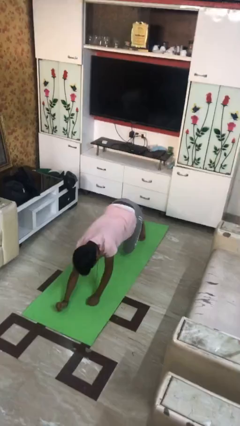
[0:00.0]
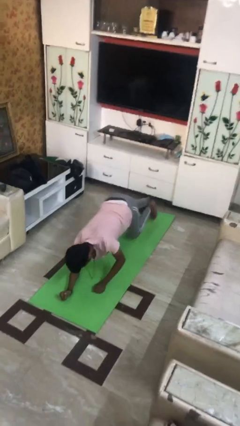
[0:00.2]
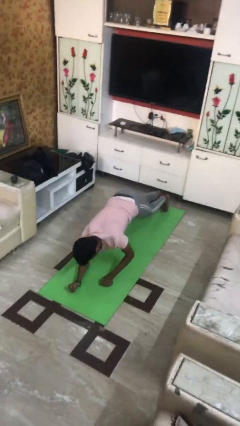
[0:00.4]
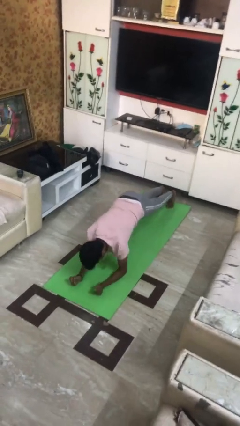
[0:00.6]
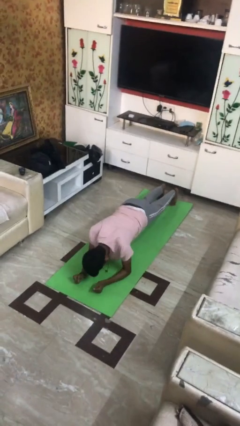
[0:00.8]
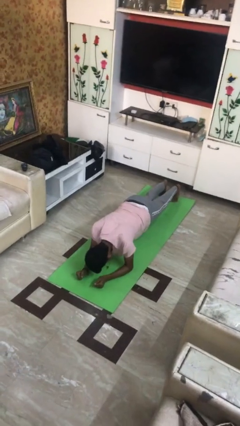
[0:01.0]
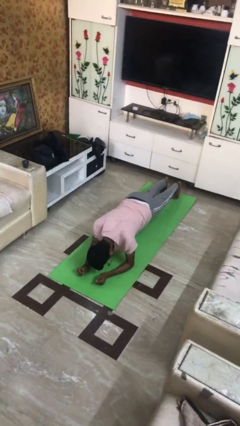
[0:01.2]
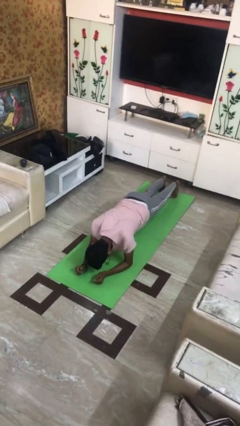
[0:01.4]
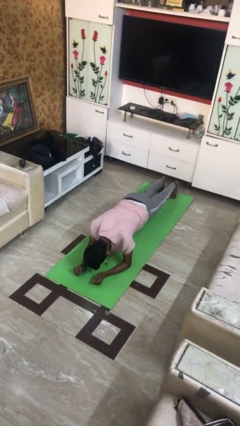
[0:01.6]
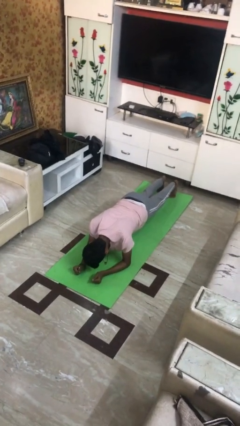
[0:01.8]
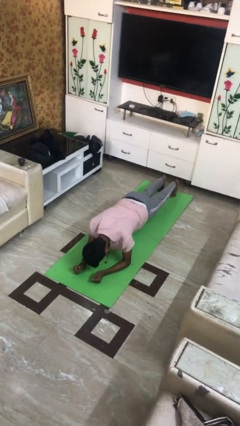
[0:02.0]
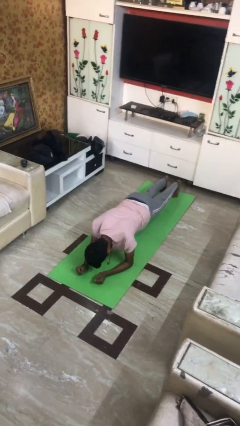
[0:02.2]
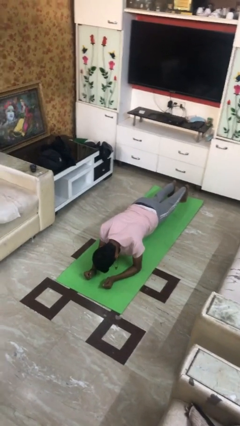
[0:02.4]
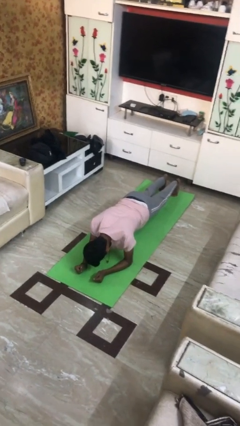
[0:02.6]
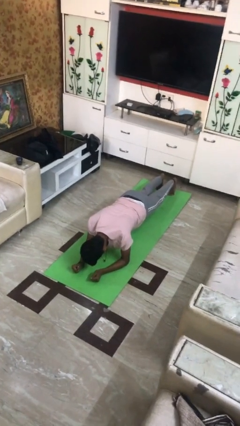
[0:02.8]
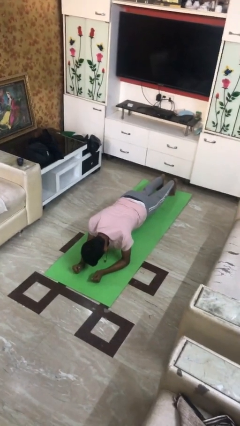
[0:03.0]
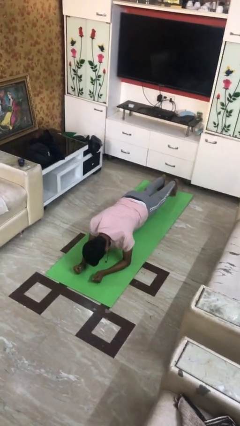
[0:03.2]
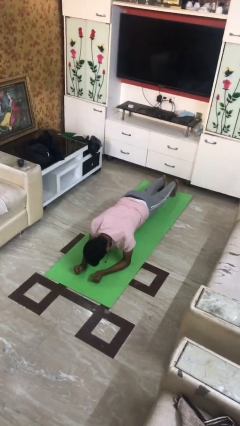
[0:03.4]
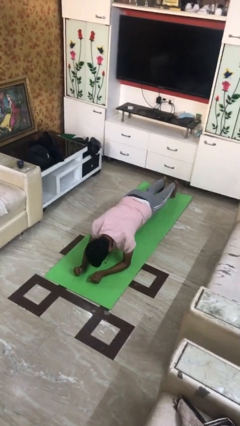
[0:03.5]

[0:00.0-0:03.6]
person exercises with plank

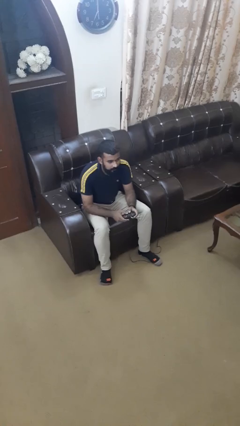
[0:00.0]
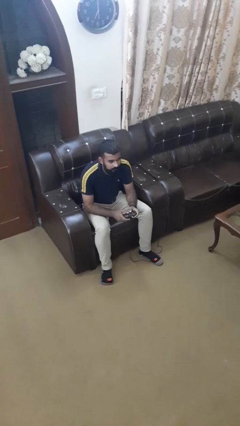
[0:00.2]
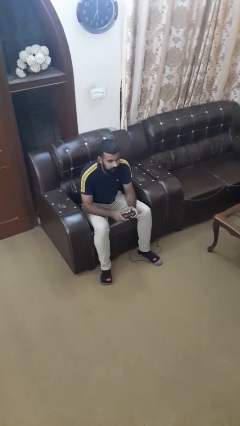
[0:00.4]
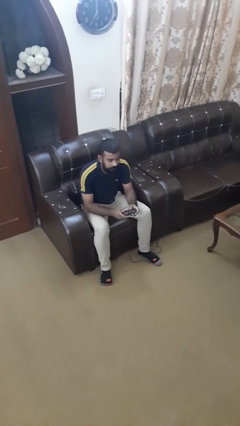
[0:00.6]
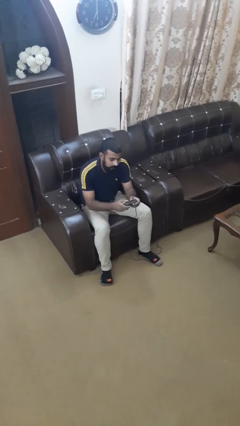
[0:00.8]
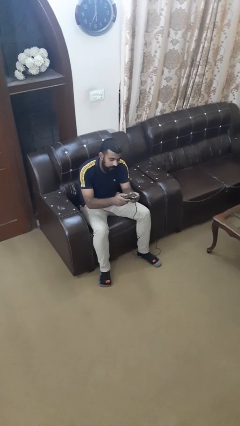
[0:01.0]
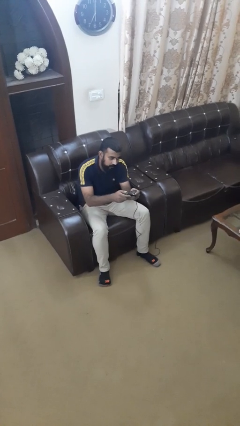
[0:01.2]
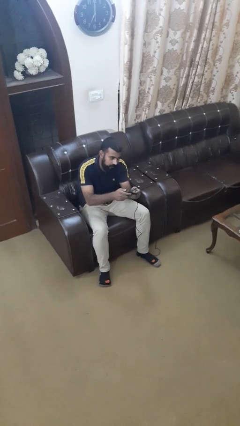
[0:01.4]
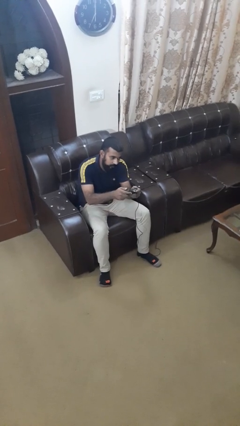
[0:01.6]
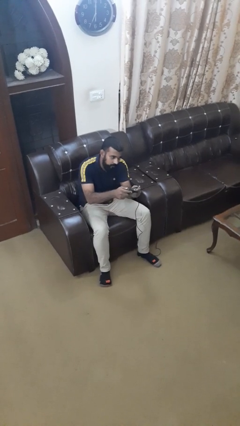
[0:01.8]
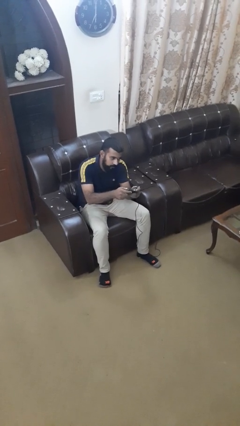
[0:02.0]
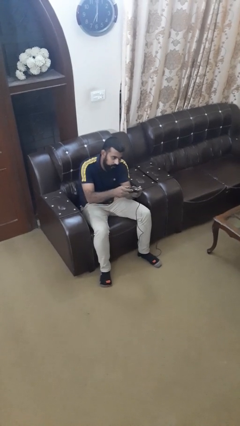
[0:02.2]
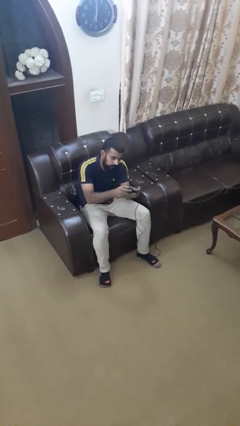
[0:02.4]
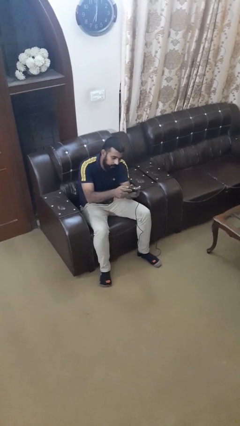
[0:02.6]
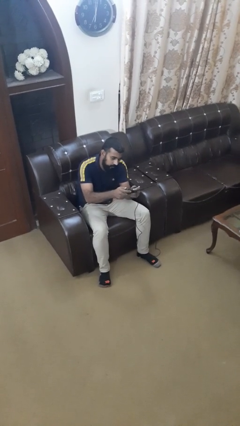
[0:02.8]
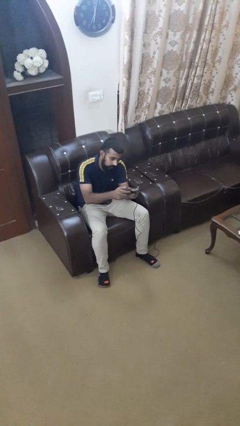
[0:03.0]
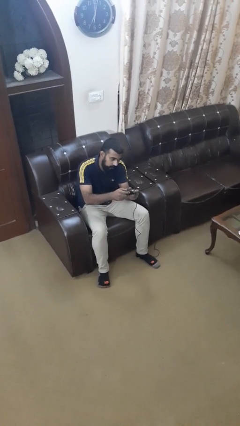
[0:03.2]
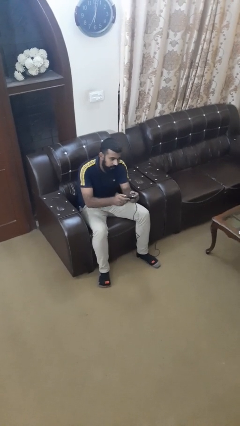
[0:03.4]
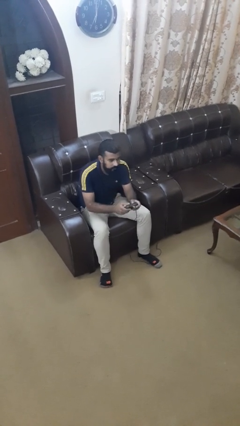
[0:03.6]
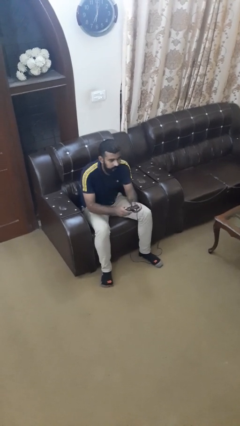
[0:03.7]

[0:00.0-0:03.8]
person interacts with handheld game

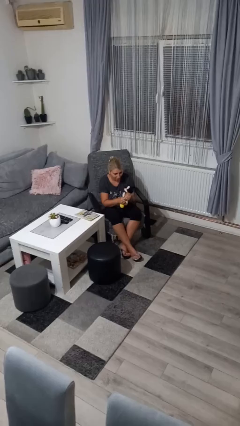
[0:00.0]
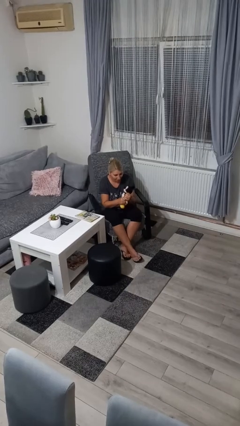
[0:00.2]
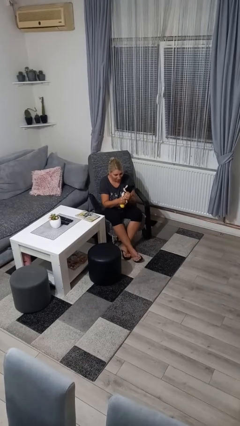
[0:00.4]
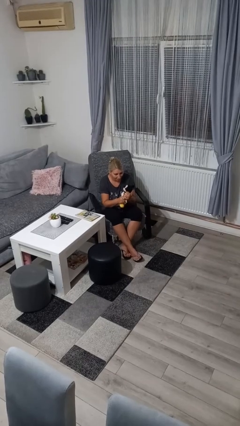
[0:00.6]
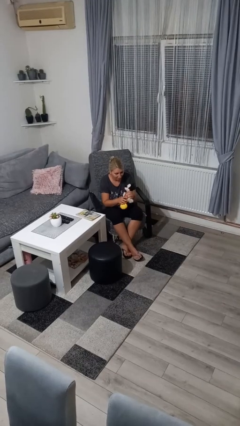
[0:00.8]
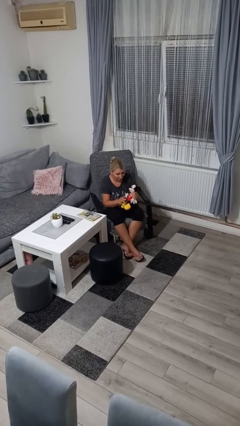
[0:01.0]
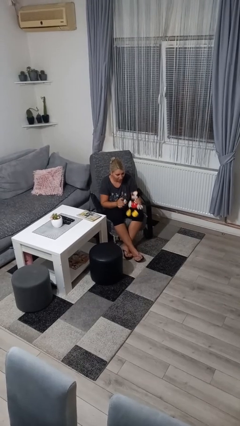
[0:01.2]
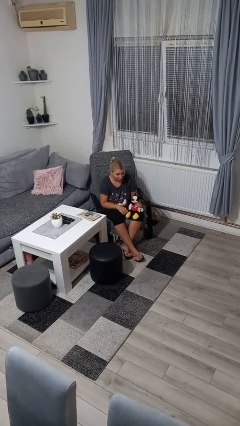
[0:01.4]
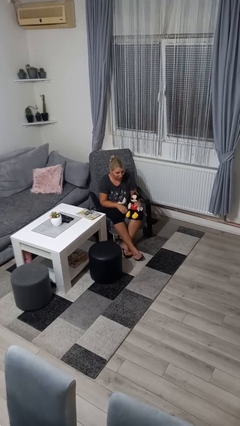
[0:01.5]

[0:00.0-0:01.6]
person squeezes object

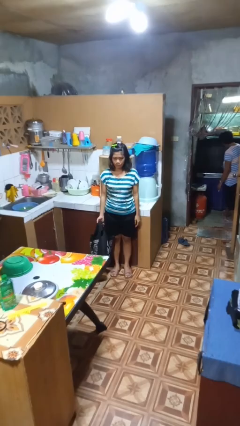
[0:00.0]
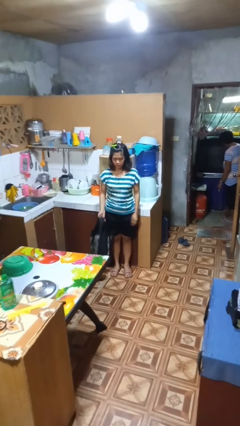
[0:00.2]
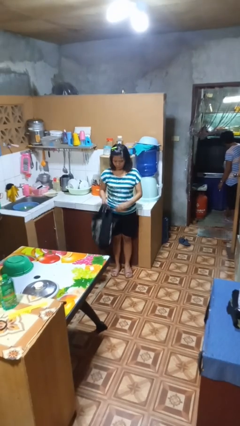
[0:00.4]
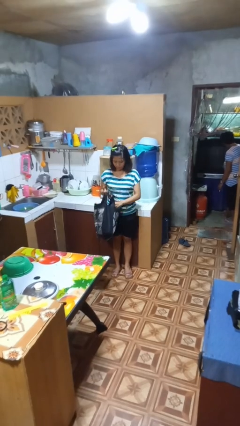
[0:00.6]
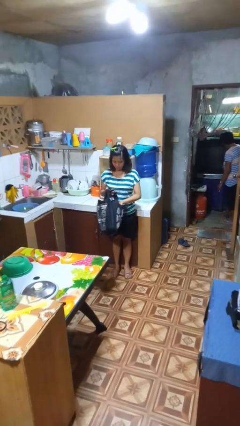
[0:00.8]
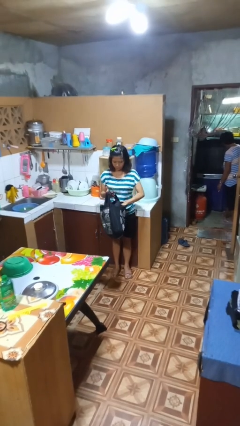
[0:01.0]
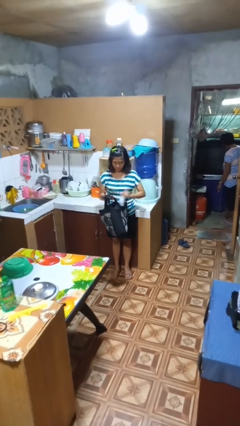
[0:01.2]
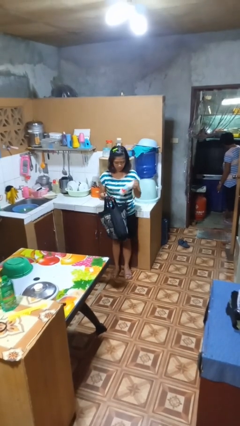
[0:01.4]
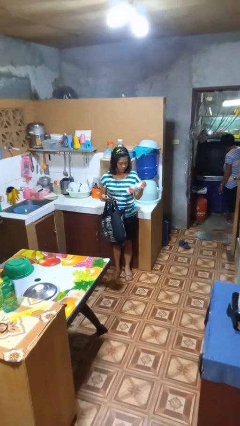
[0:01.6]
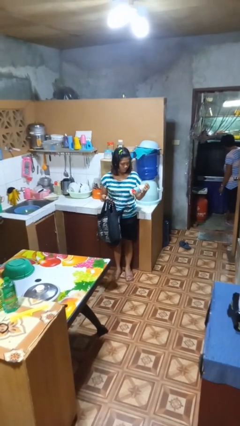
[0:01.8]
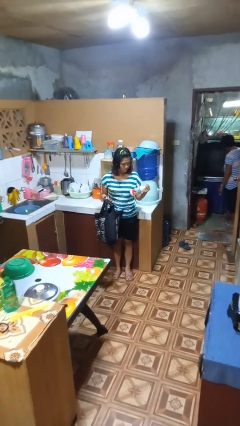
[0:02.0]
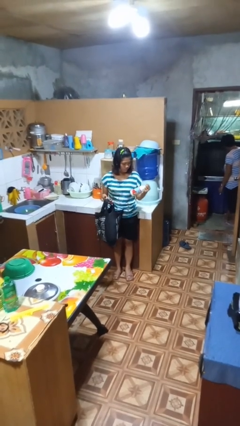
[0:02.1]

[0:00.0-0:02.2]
person takes object from bag

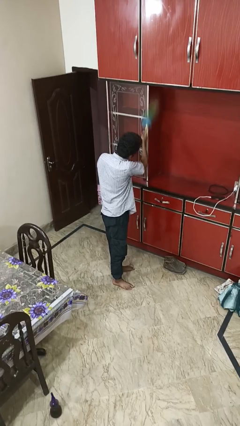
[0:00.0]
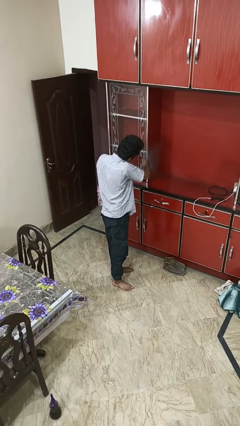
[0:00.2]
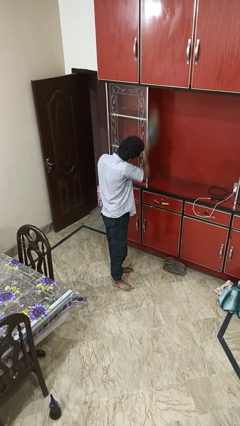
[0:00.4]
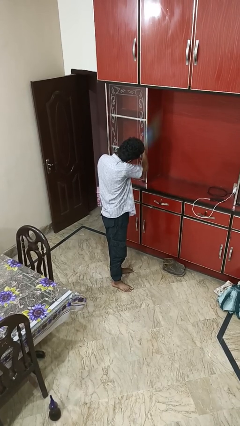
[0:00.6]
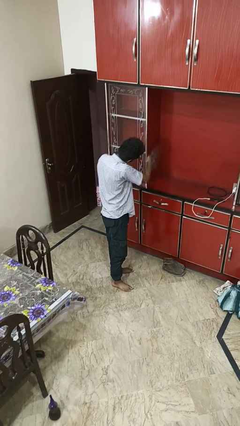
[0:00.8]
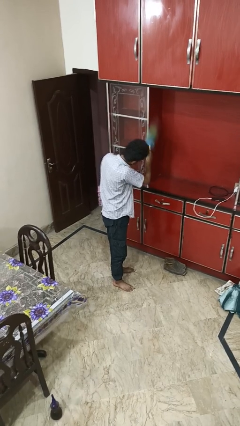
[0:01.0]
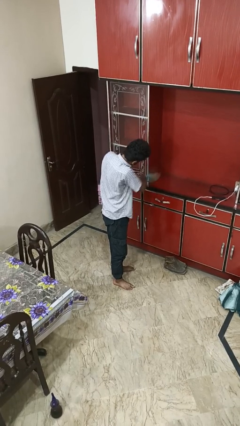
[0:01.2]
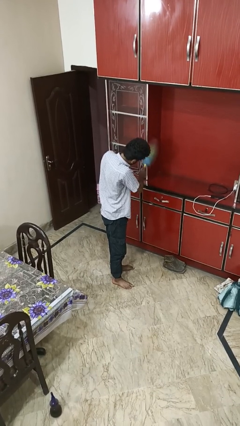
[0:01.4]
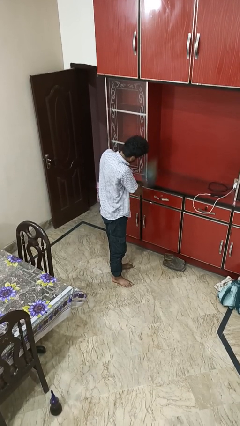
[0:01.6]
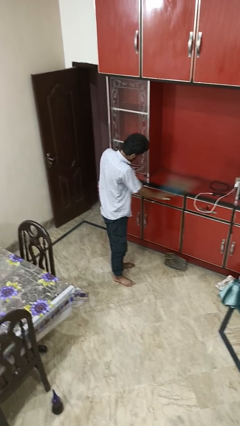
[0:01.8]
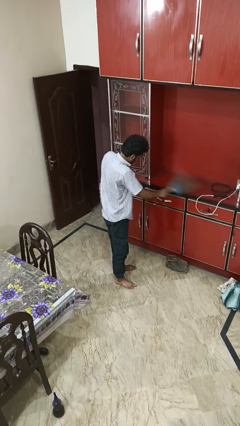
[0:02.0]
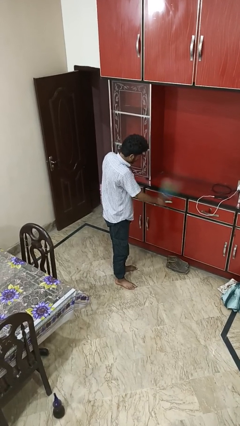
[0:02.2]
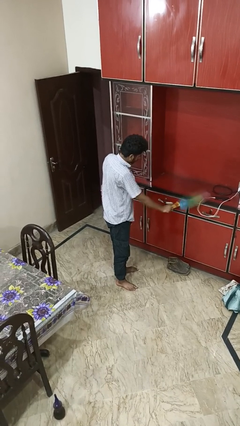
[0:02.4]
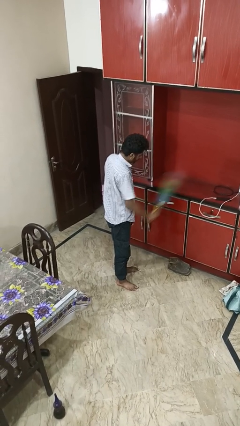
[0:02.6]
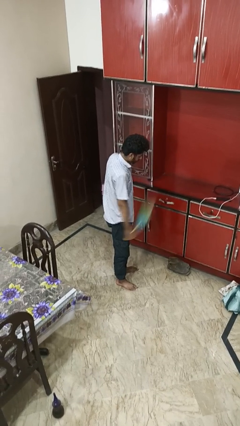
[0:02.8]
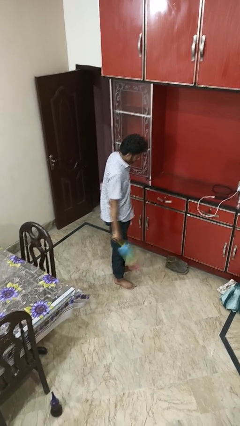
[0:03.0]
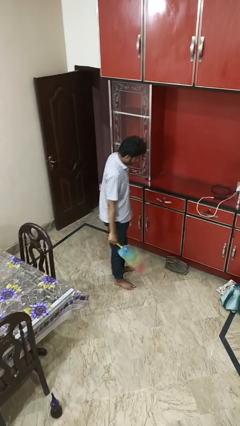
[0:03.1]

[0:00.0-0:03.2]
person dusts furniture

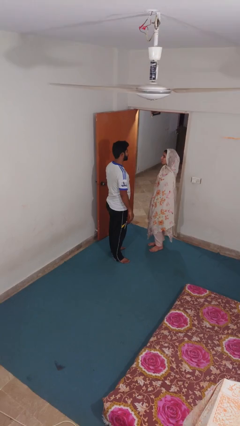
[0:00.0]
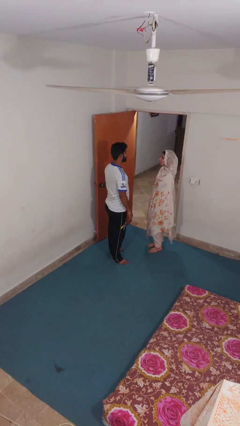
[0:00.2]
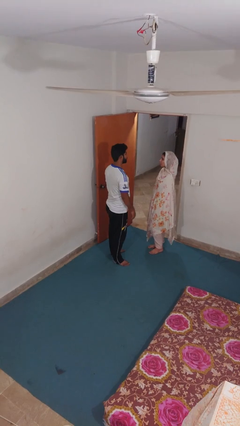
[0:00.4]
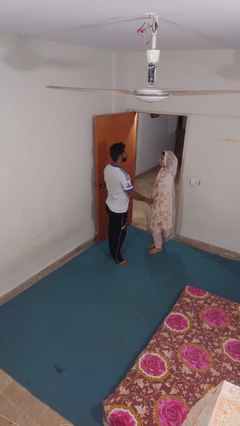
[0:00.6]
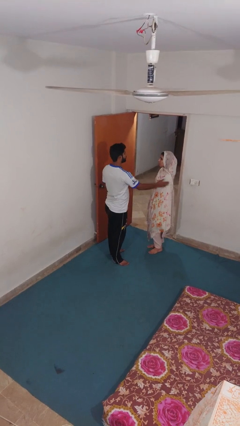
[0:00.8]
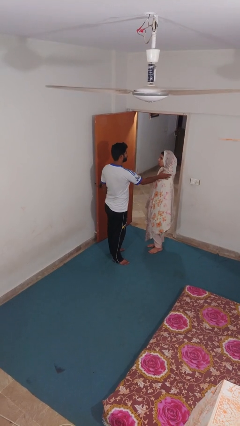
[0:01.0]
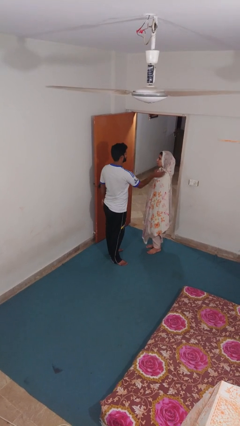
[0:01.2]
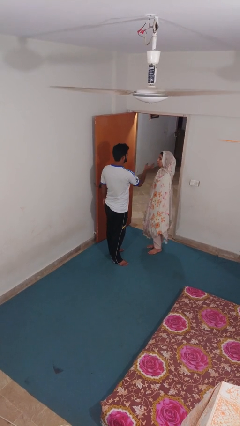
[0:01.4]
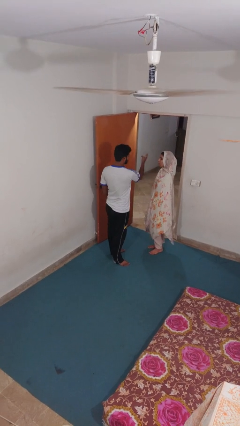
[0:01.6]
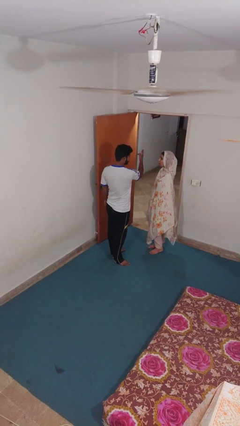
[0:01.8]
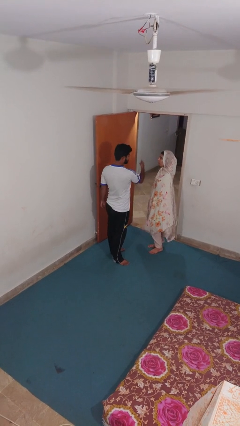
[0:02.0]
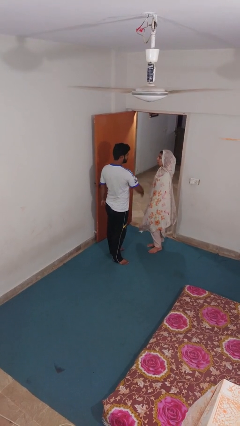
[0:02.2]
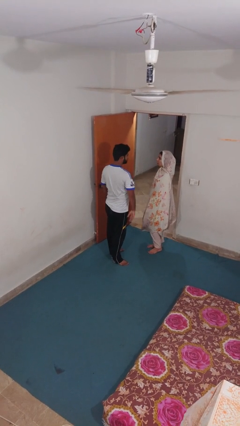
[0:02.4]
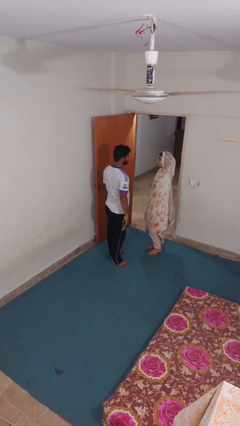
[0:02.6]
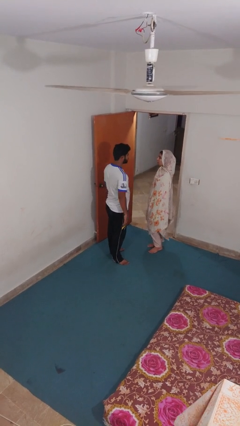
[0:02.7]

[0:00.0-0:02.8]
person shoves person

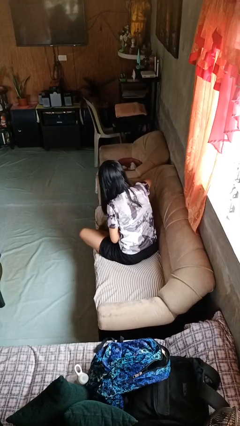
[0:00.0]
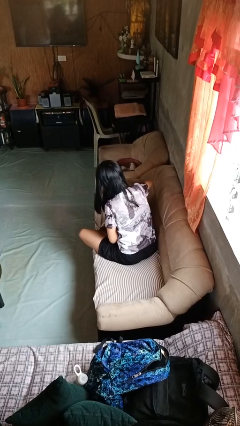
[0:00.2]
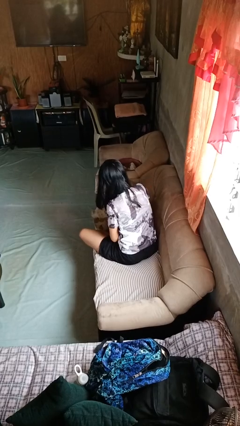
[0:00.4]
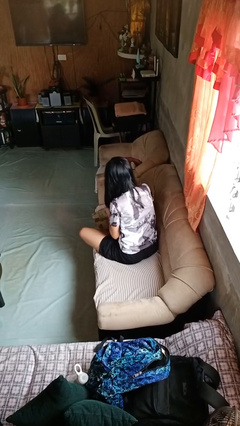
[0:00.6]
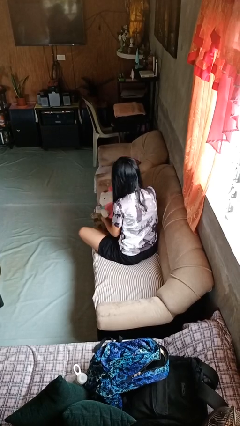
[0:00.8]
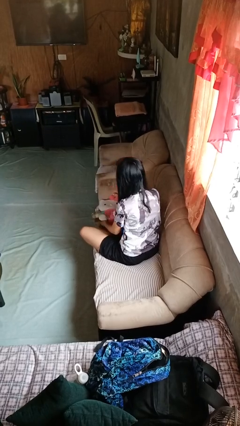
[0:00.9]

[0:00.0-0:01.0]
person searches in couch
